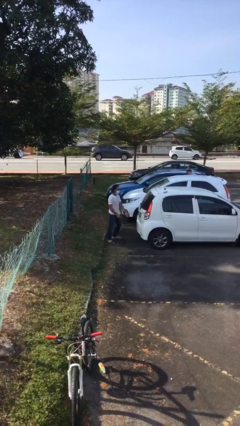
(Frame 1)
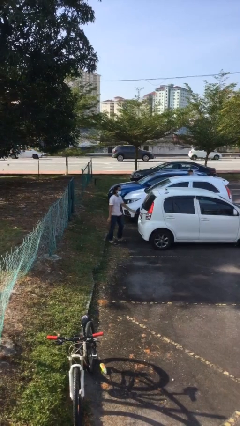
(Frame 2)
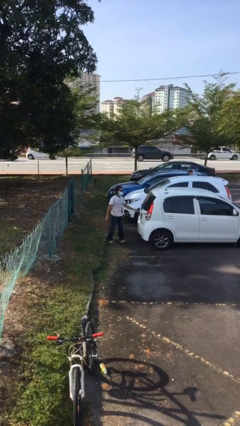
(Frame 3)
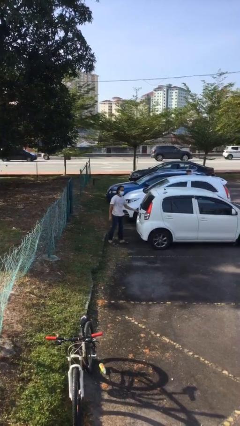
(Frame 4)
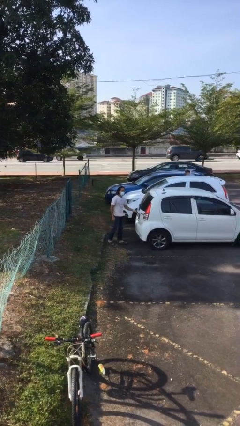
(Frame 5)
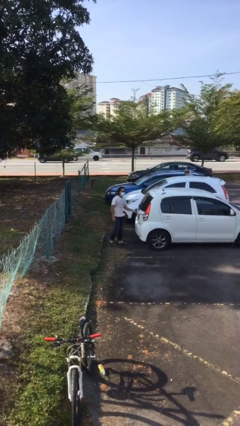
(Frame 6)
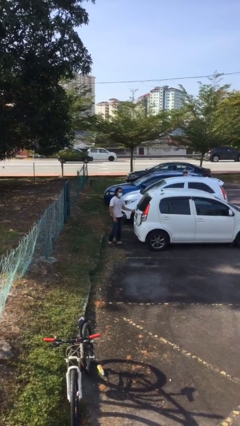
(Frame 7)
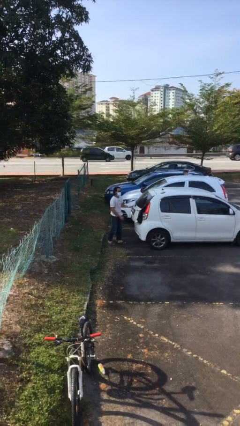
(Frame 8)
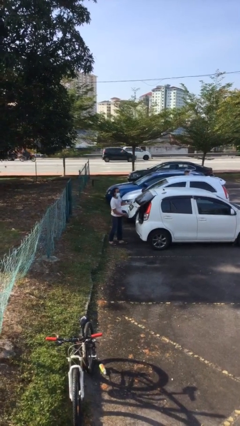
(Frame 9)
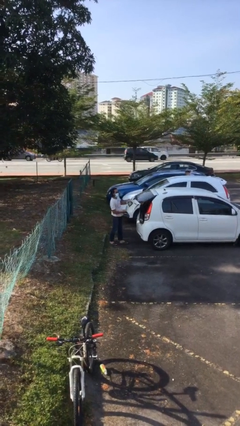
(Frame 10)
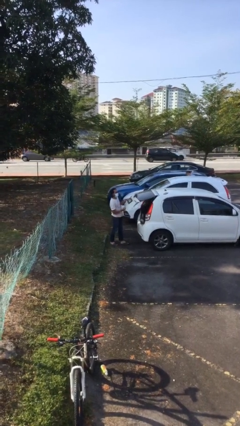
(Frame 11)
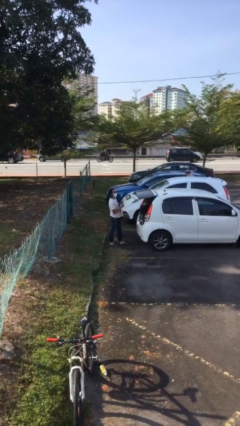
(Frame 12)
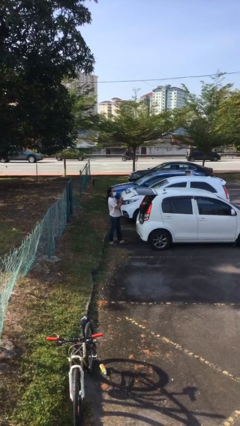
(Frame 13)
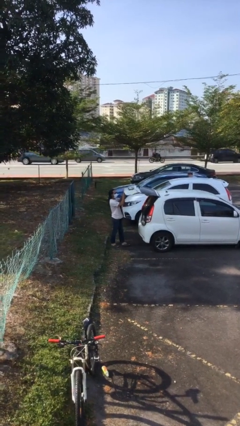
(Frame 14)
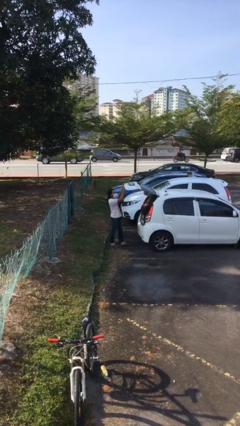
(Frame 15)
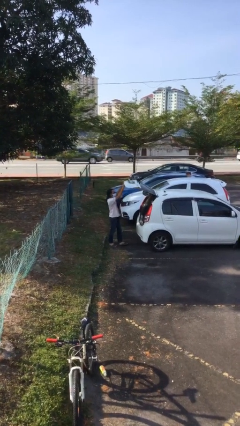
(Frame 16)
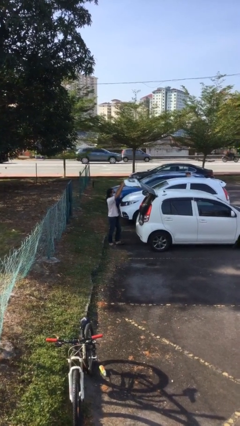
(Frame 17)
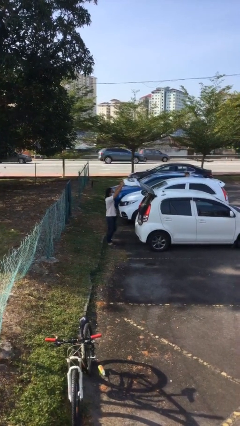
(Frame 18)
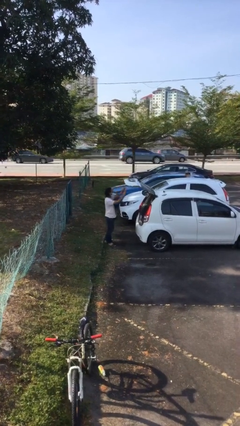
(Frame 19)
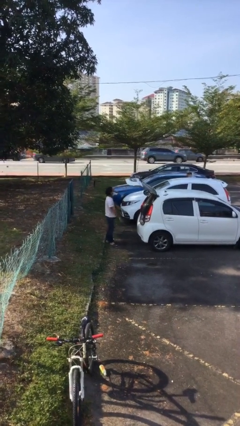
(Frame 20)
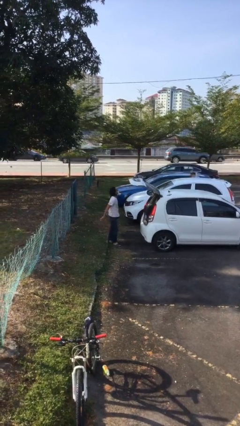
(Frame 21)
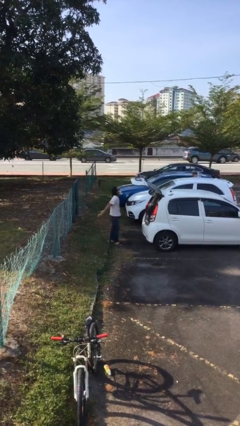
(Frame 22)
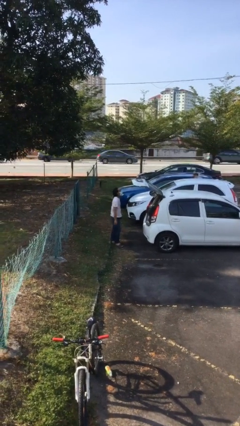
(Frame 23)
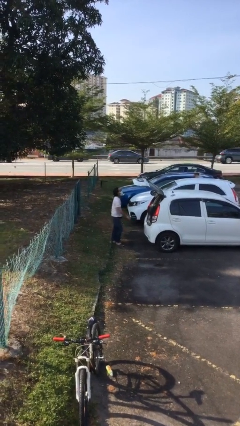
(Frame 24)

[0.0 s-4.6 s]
person opens car trunk

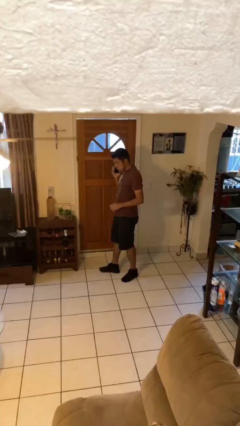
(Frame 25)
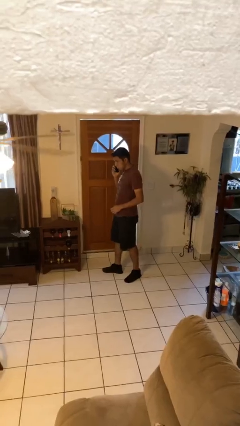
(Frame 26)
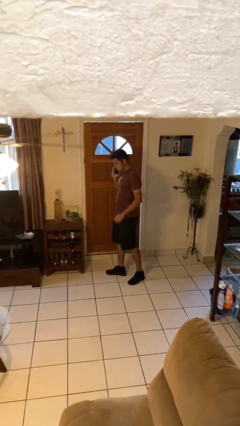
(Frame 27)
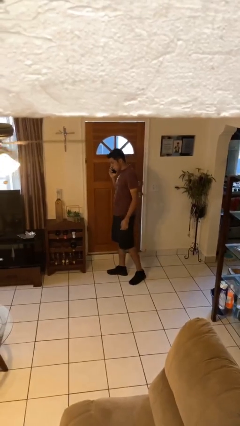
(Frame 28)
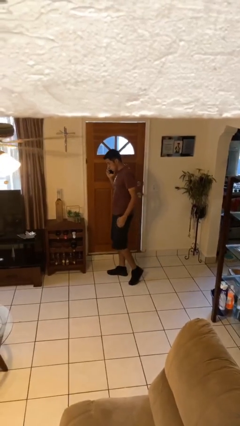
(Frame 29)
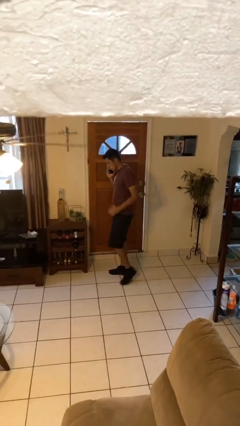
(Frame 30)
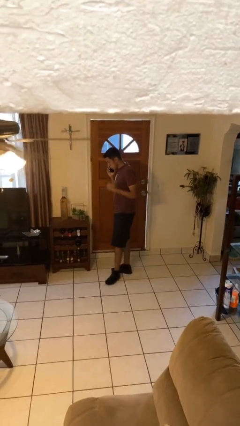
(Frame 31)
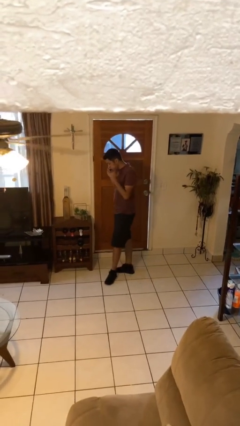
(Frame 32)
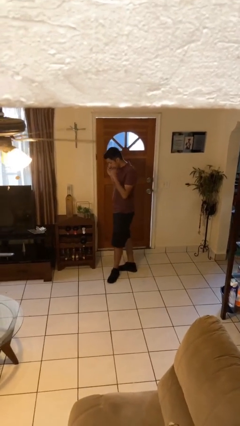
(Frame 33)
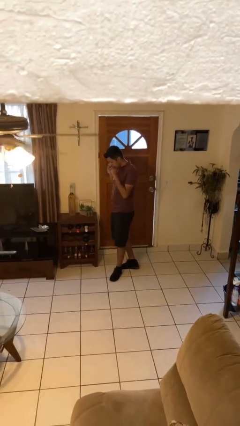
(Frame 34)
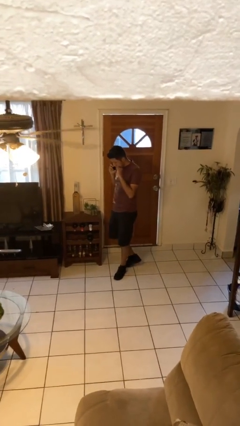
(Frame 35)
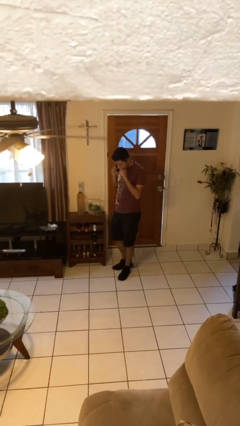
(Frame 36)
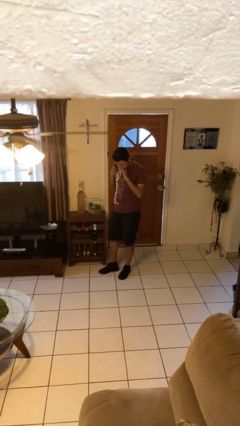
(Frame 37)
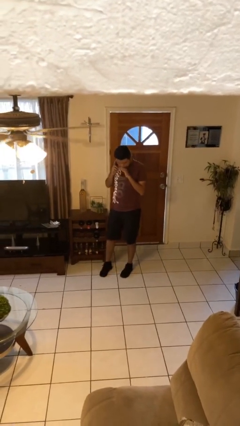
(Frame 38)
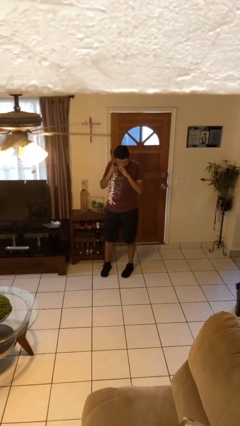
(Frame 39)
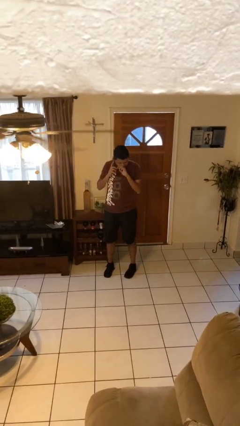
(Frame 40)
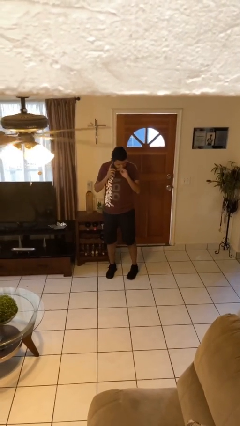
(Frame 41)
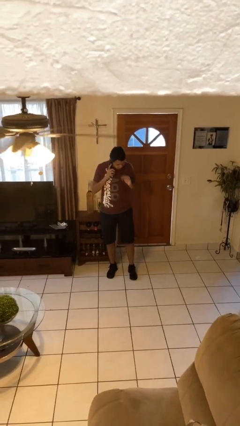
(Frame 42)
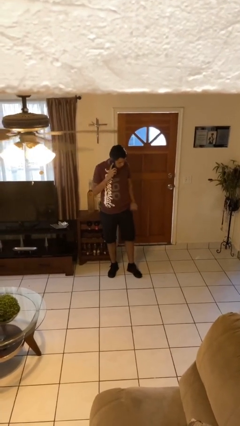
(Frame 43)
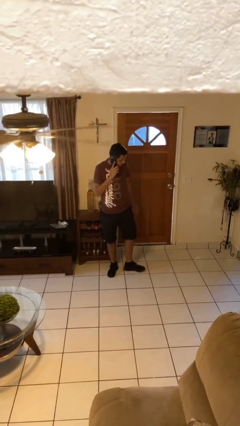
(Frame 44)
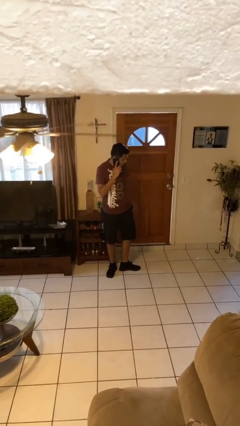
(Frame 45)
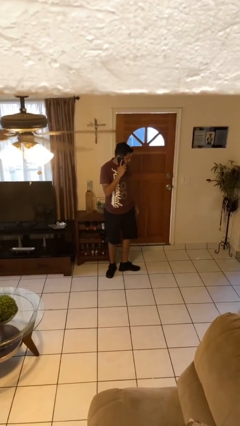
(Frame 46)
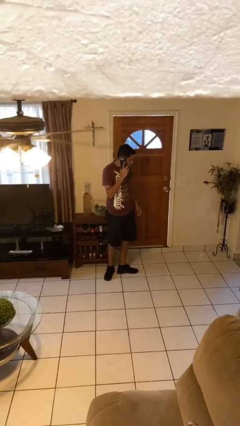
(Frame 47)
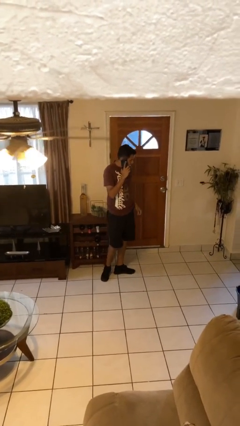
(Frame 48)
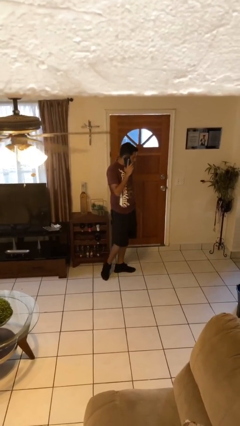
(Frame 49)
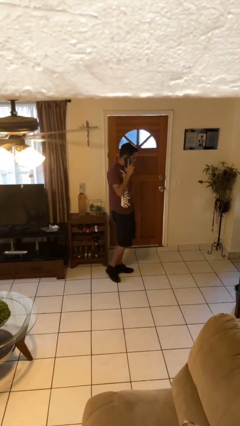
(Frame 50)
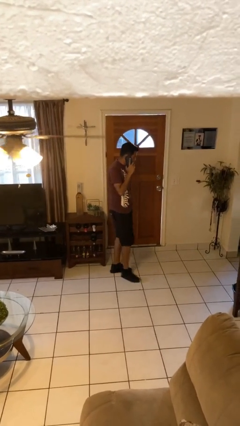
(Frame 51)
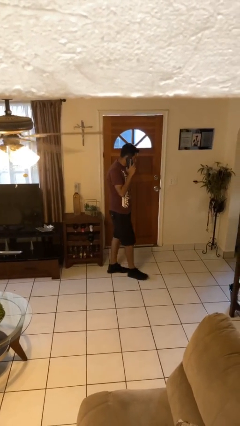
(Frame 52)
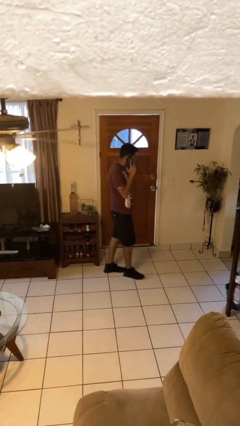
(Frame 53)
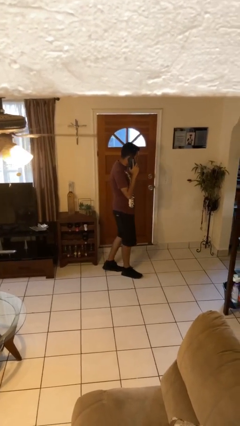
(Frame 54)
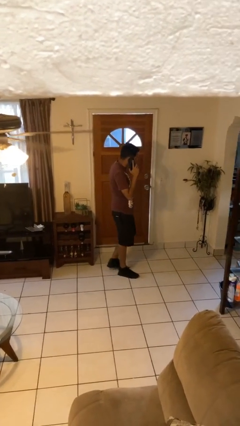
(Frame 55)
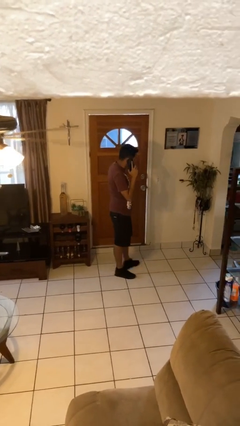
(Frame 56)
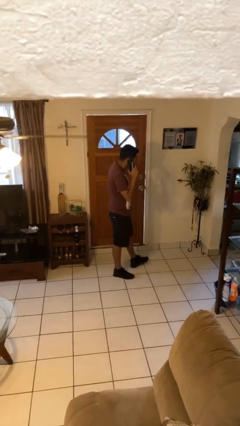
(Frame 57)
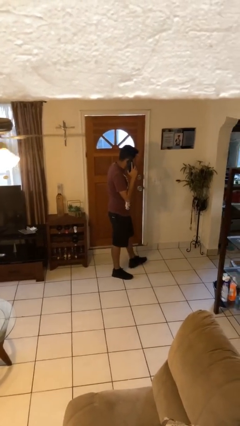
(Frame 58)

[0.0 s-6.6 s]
person talks on phone

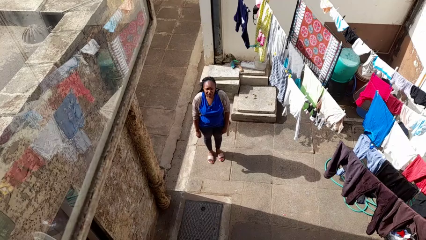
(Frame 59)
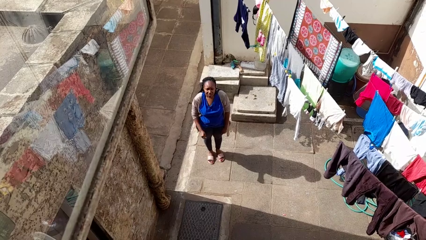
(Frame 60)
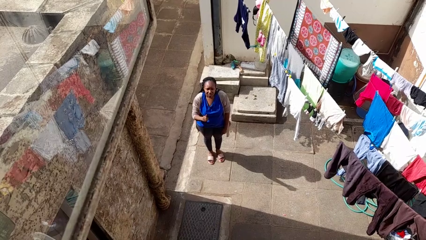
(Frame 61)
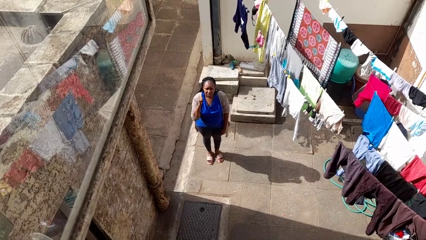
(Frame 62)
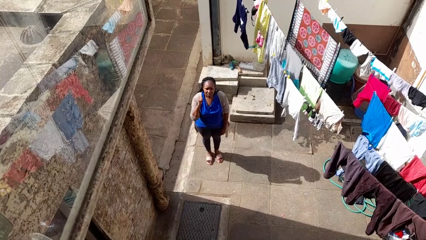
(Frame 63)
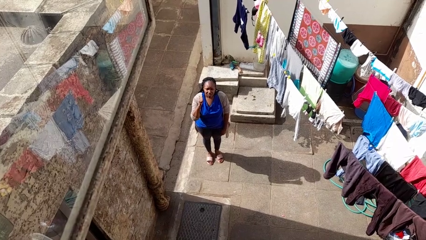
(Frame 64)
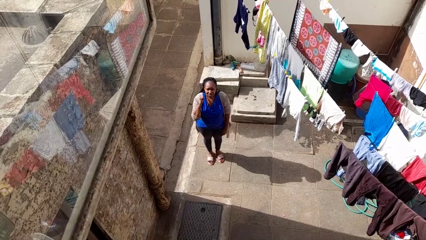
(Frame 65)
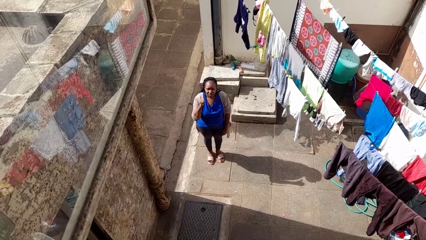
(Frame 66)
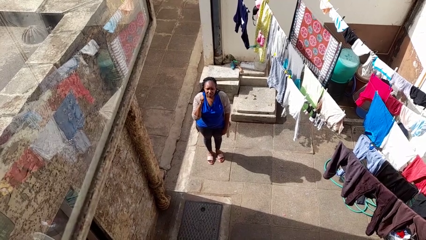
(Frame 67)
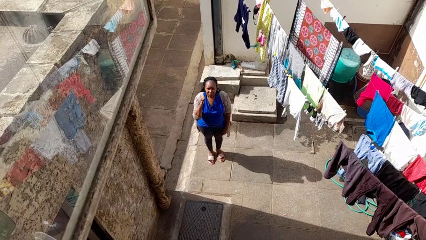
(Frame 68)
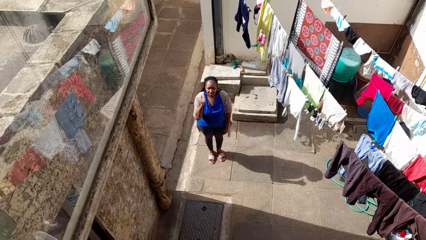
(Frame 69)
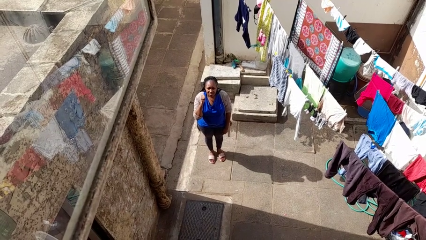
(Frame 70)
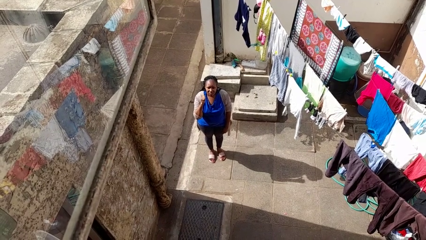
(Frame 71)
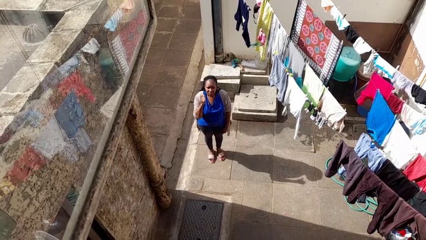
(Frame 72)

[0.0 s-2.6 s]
person gestures behind me

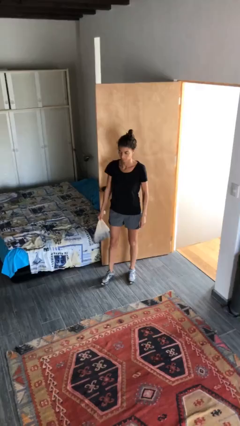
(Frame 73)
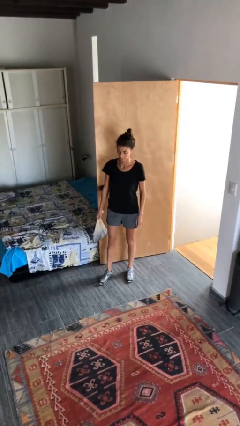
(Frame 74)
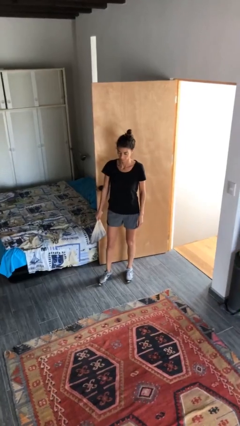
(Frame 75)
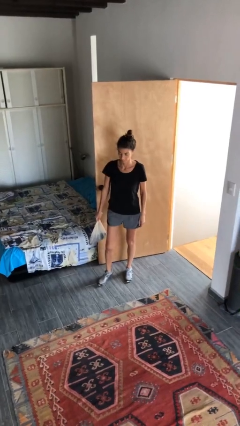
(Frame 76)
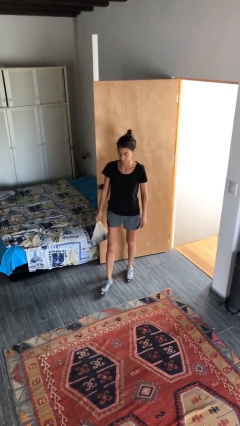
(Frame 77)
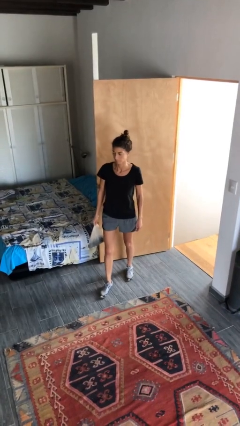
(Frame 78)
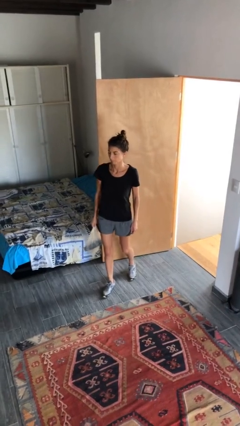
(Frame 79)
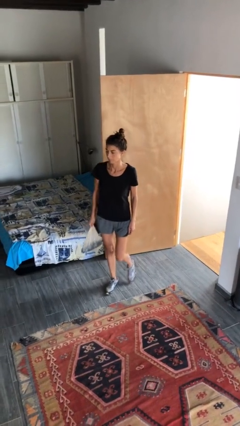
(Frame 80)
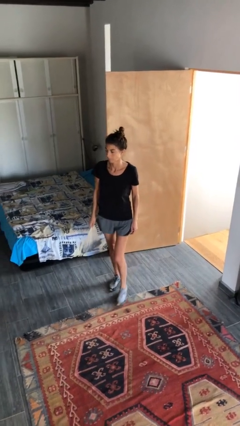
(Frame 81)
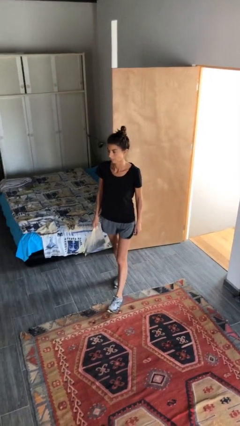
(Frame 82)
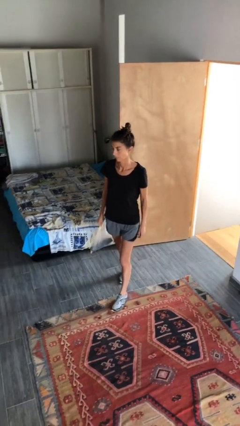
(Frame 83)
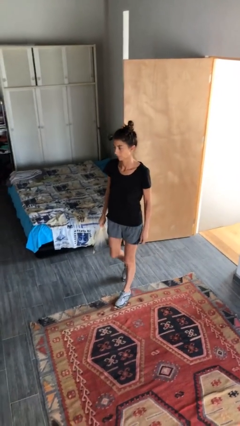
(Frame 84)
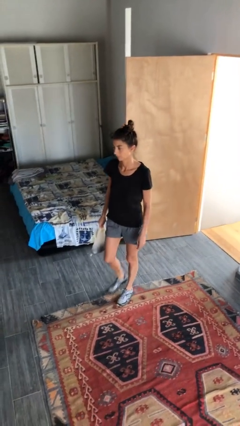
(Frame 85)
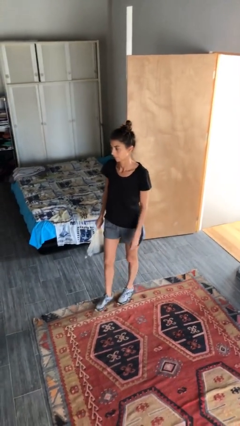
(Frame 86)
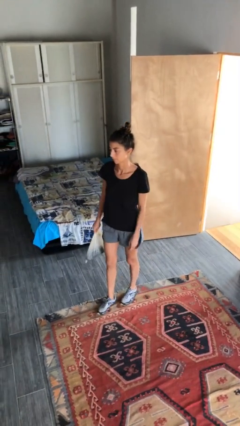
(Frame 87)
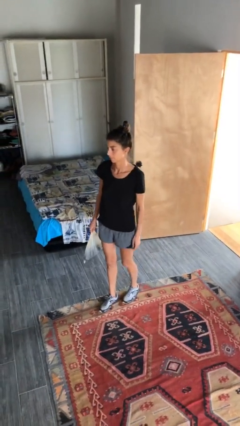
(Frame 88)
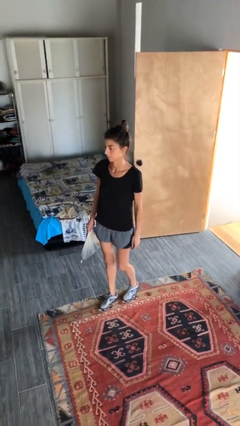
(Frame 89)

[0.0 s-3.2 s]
person carries groceries

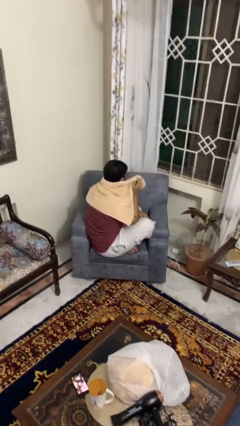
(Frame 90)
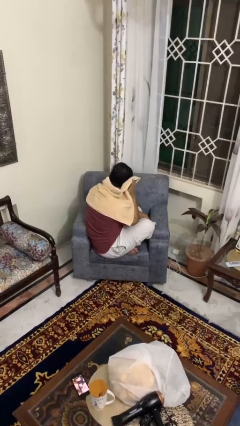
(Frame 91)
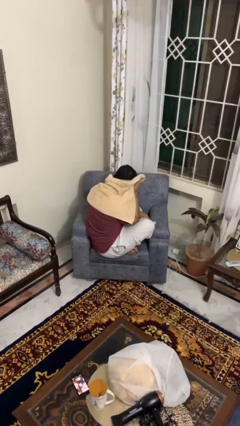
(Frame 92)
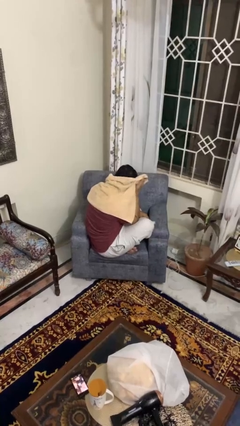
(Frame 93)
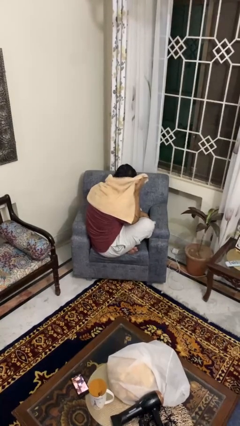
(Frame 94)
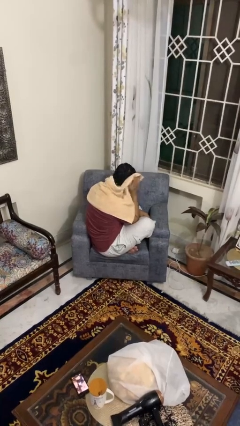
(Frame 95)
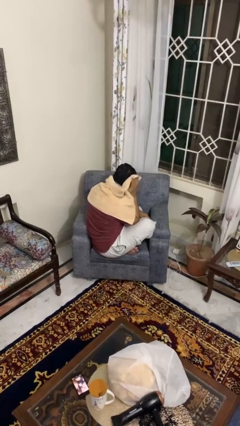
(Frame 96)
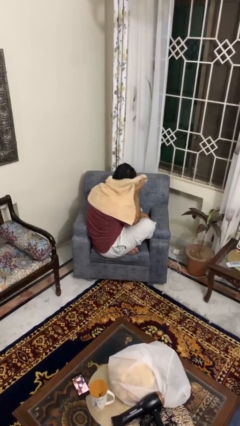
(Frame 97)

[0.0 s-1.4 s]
person dries hair with towel
